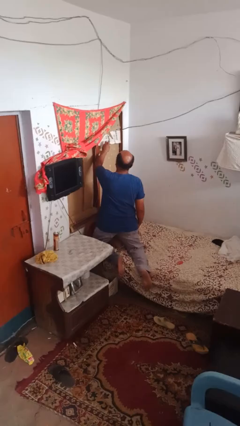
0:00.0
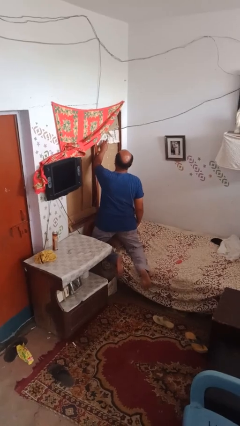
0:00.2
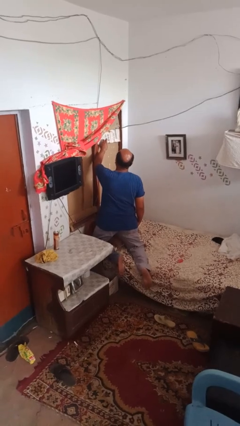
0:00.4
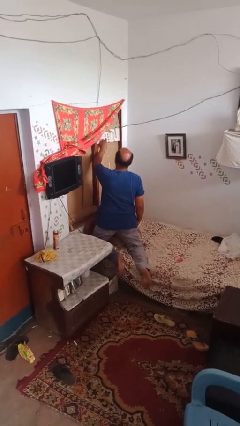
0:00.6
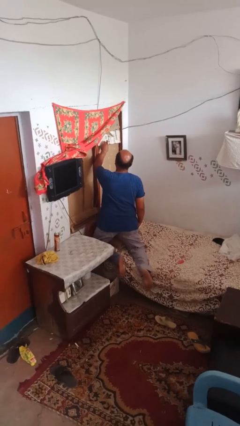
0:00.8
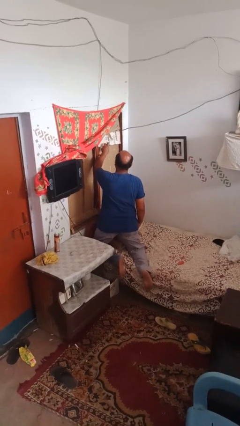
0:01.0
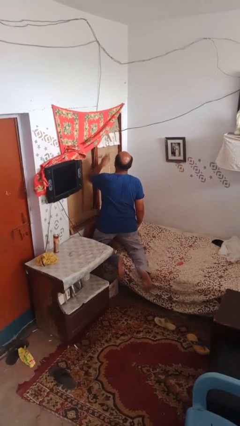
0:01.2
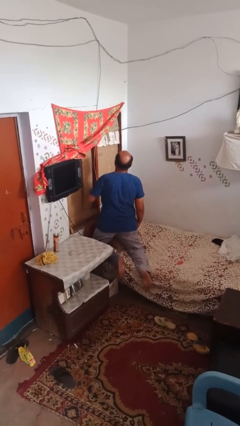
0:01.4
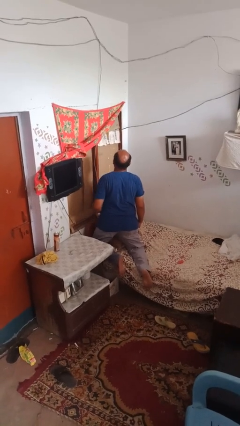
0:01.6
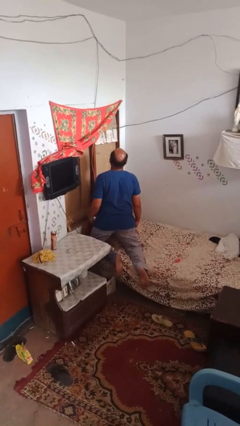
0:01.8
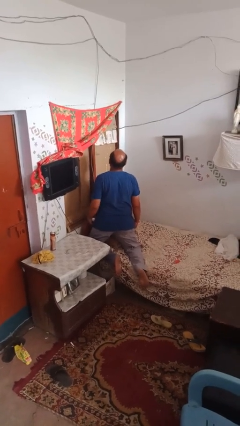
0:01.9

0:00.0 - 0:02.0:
person sprays from bottle

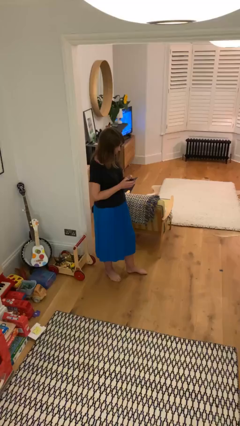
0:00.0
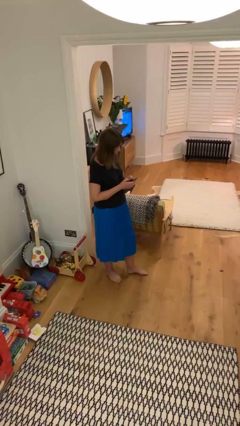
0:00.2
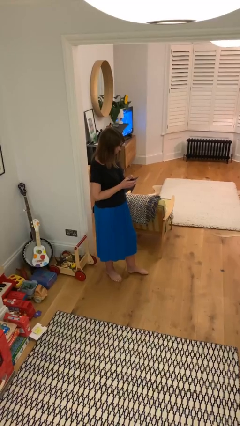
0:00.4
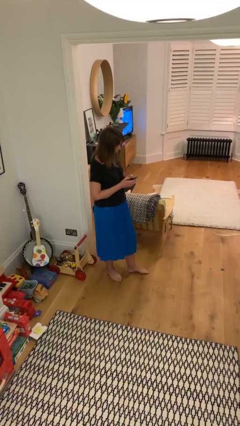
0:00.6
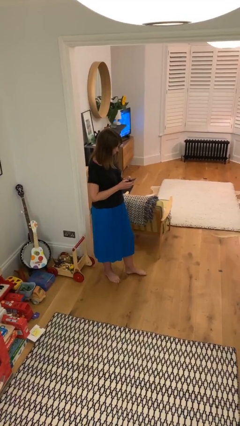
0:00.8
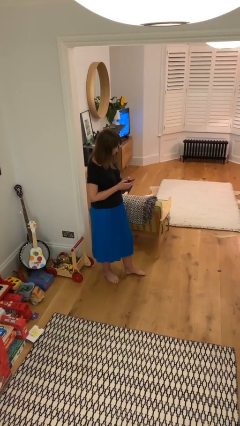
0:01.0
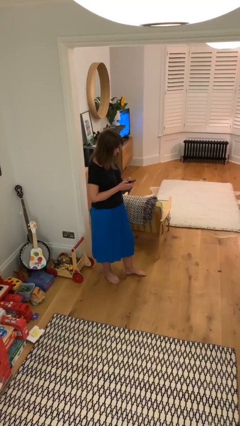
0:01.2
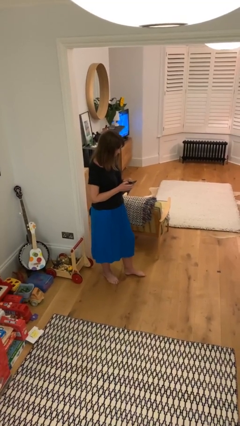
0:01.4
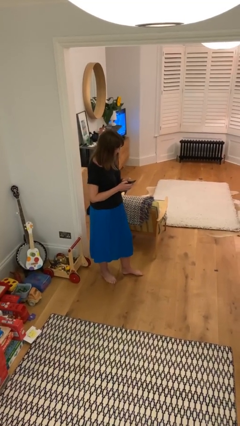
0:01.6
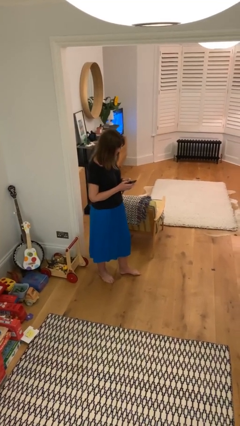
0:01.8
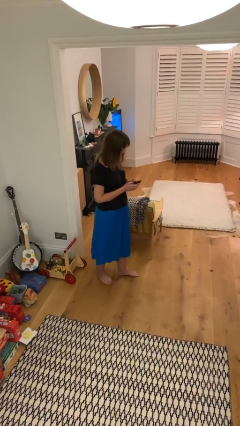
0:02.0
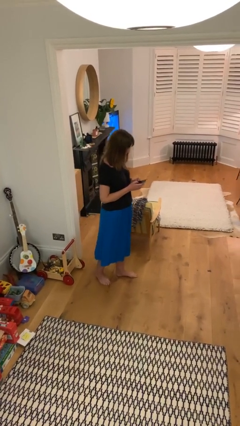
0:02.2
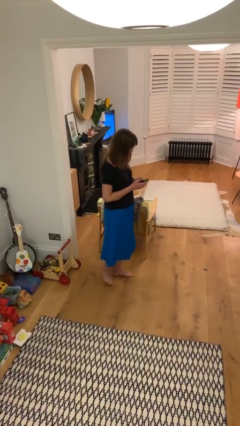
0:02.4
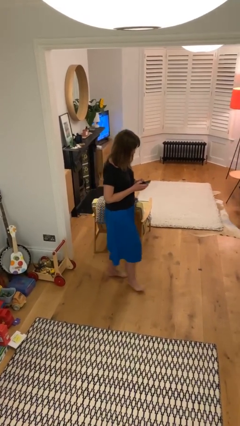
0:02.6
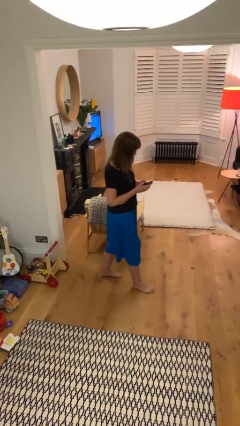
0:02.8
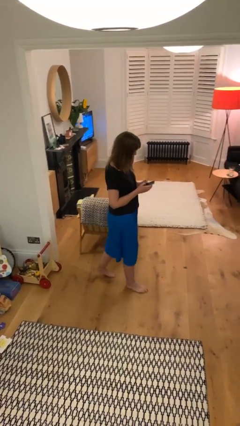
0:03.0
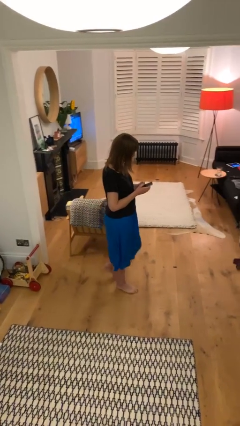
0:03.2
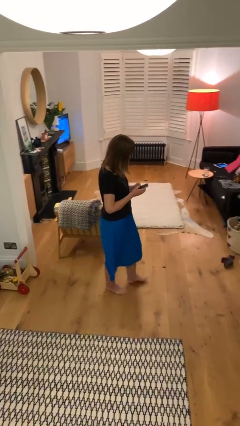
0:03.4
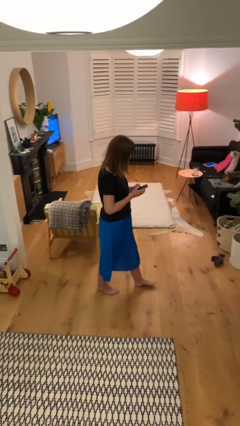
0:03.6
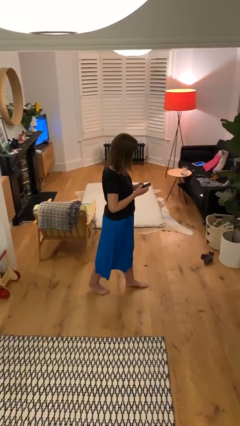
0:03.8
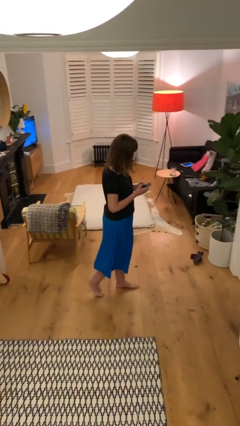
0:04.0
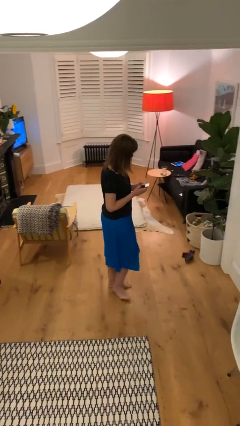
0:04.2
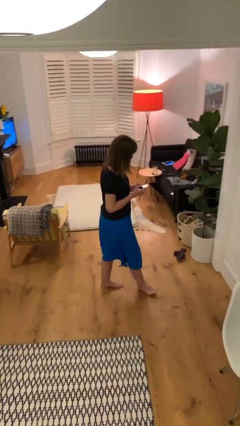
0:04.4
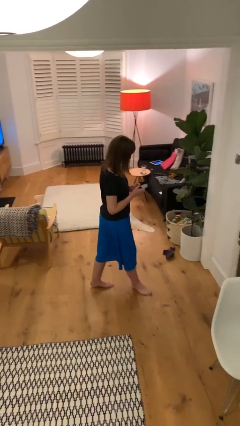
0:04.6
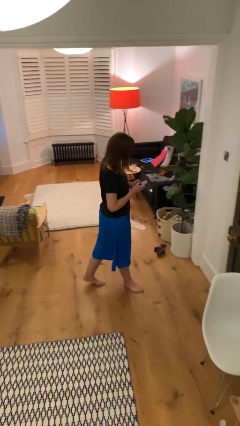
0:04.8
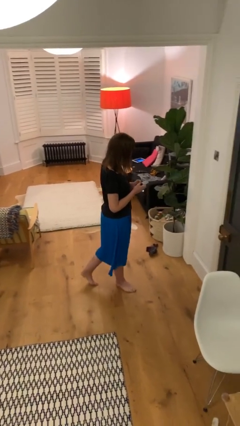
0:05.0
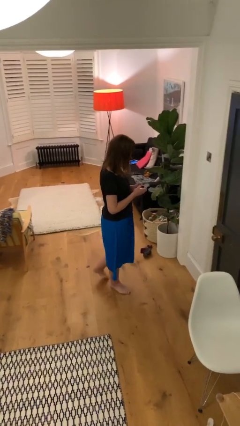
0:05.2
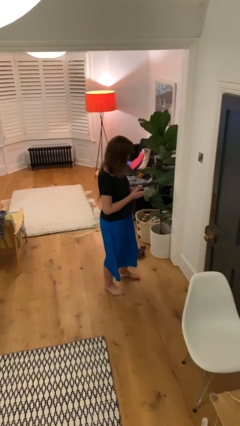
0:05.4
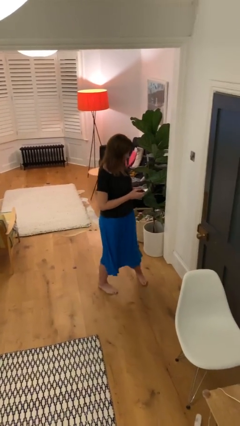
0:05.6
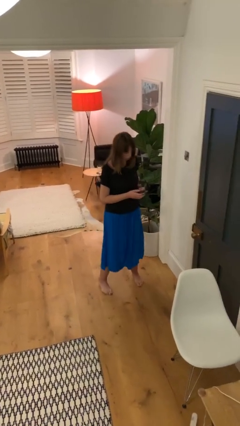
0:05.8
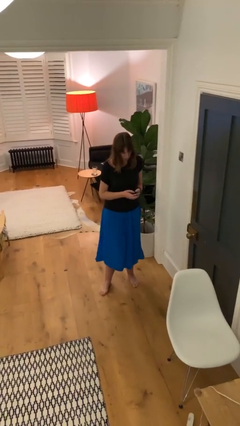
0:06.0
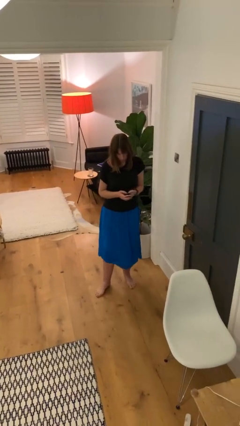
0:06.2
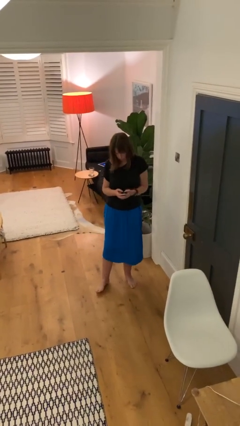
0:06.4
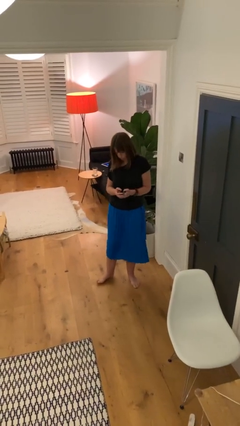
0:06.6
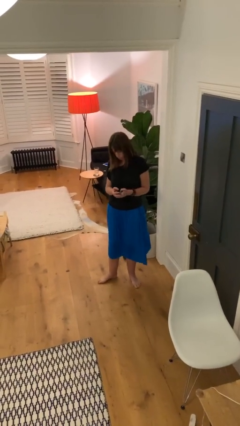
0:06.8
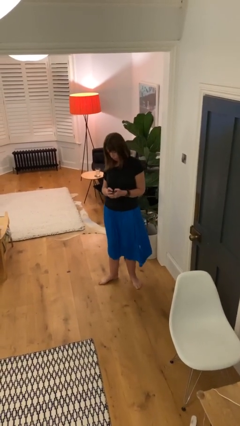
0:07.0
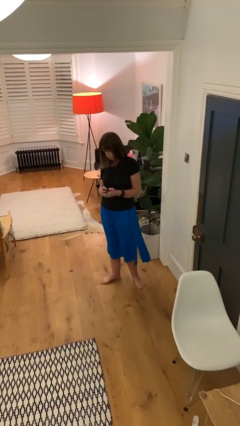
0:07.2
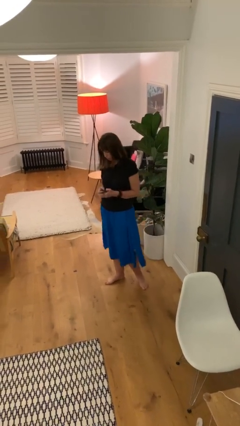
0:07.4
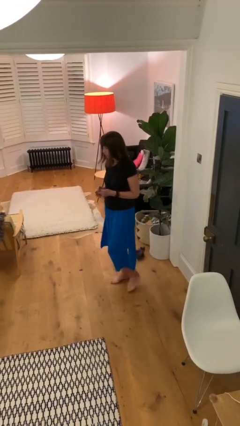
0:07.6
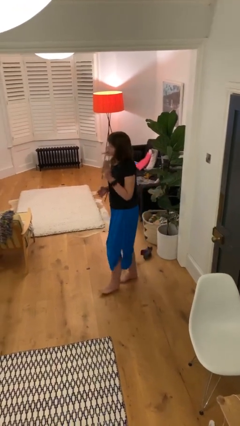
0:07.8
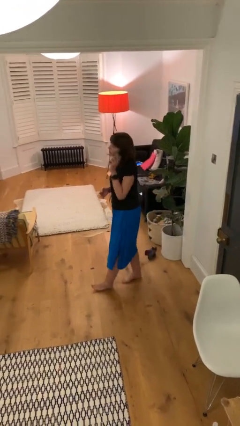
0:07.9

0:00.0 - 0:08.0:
person texts on phone

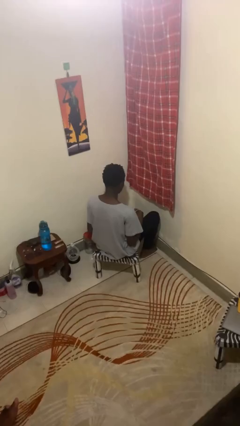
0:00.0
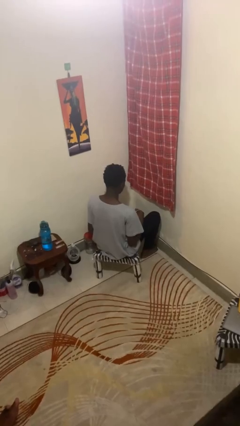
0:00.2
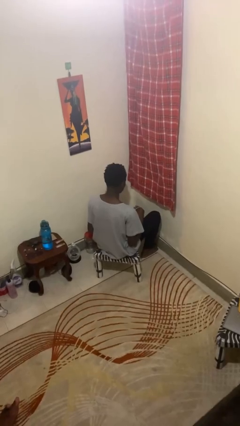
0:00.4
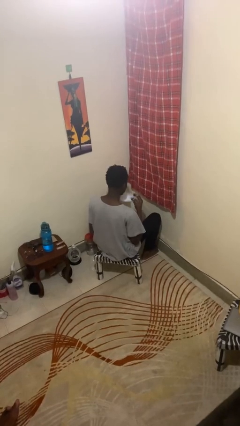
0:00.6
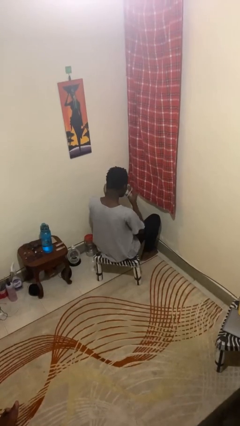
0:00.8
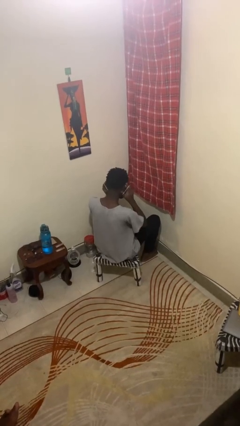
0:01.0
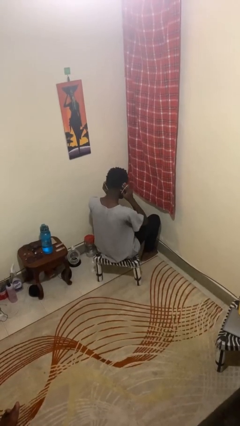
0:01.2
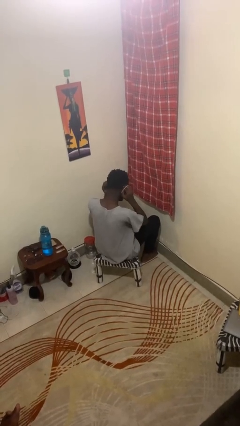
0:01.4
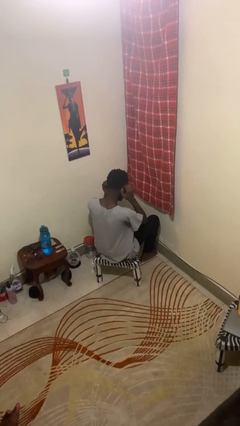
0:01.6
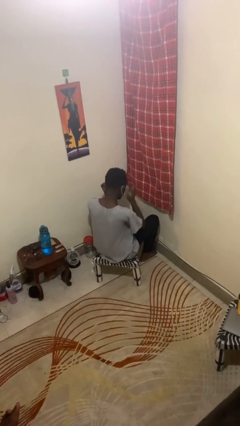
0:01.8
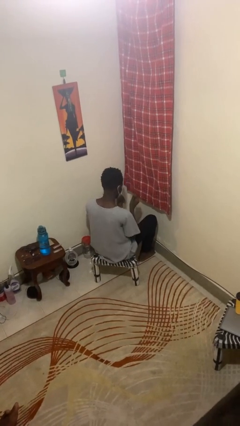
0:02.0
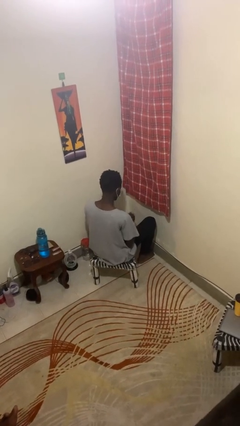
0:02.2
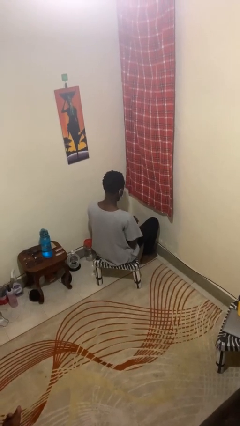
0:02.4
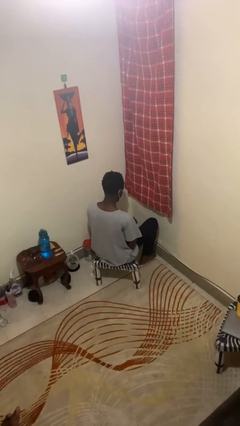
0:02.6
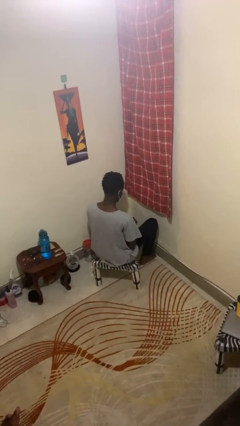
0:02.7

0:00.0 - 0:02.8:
person puts on facemask

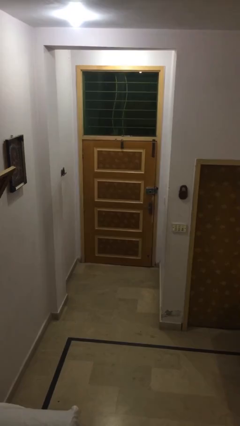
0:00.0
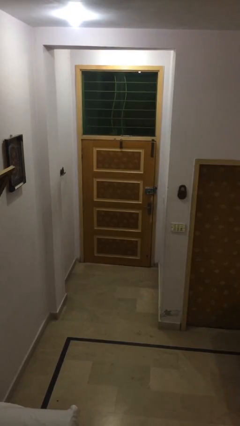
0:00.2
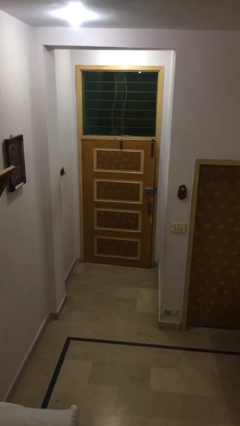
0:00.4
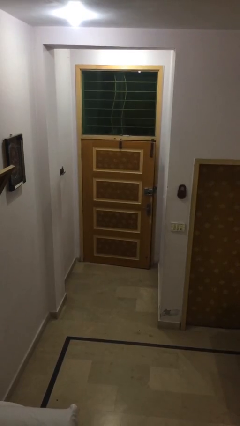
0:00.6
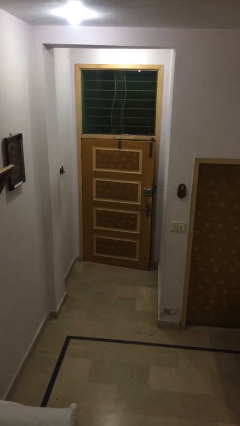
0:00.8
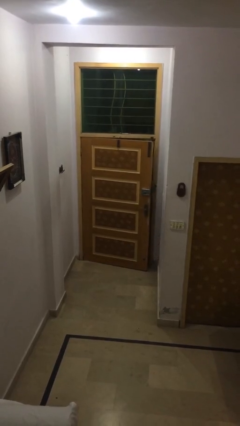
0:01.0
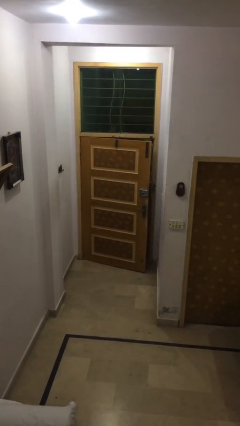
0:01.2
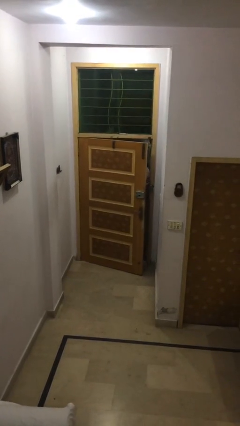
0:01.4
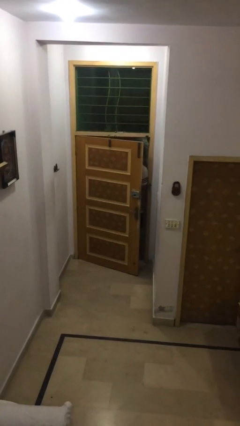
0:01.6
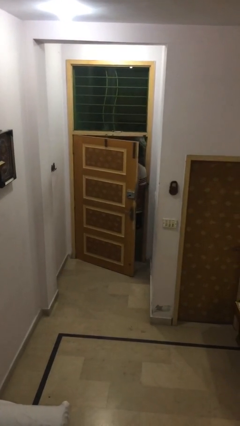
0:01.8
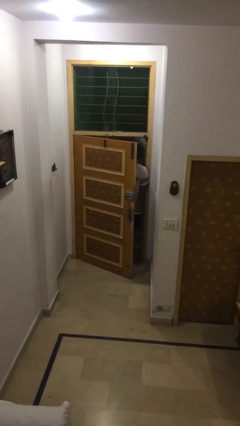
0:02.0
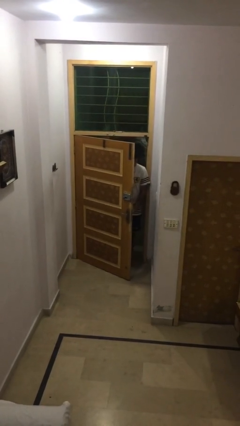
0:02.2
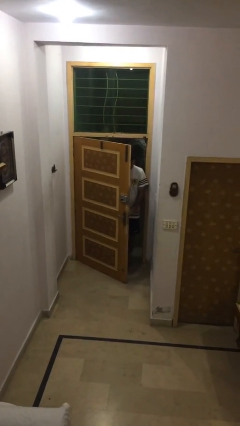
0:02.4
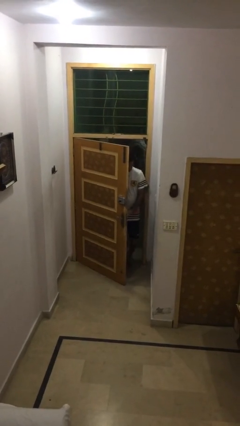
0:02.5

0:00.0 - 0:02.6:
person opens facility door

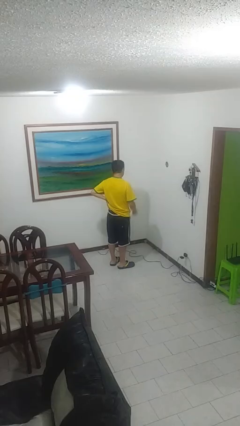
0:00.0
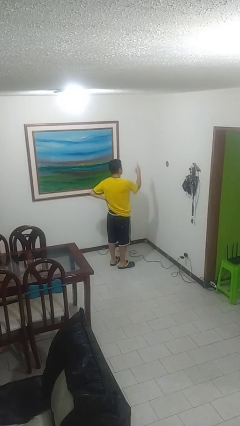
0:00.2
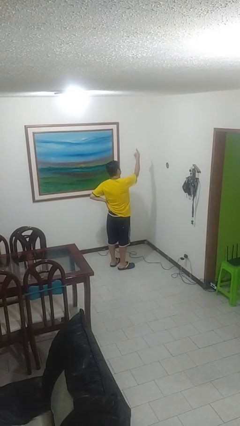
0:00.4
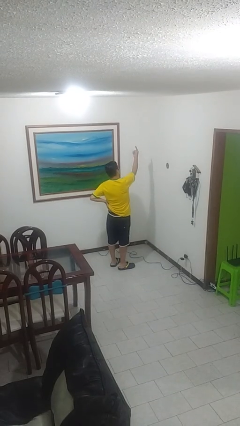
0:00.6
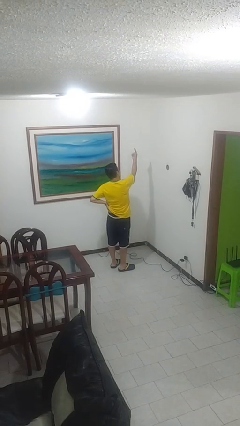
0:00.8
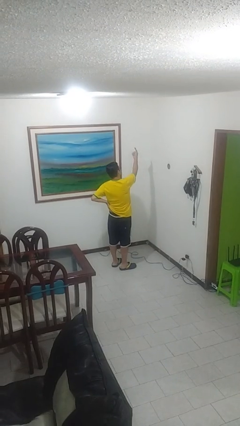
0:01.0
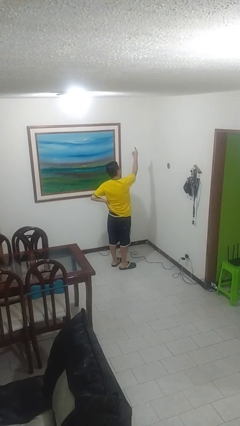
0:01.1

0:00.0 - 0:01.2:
person gestures number one

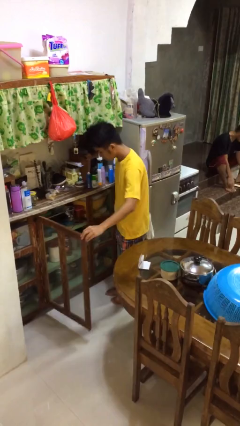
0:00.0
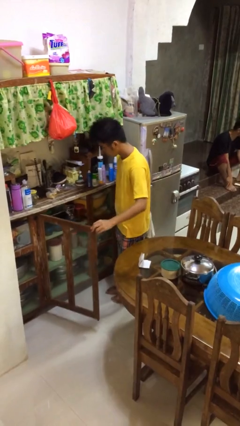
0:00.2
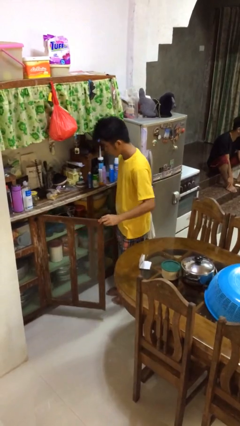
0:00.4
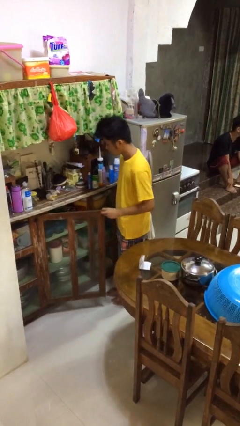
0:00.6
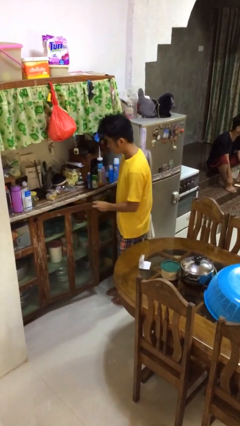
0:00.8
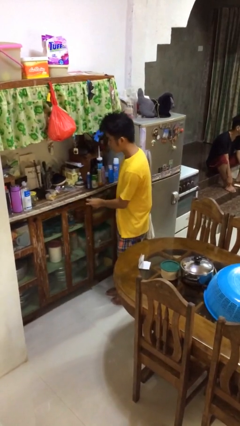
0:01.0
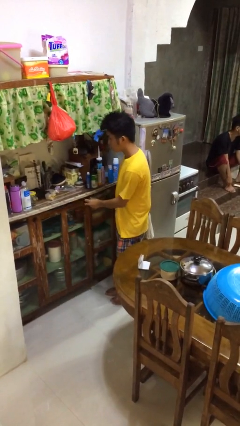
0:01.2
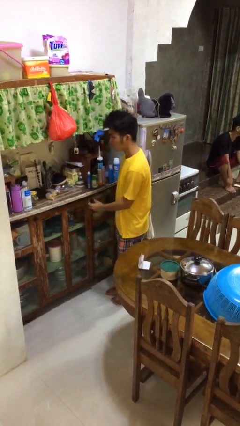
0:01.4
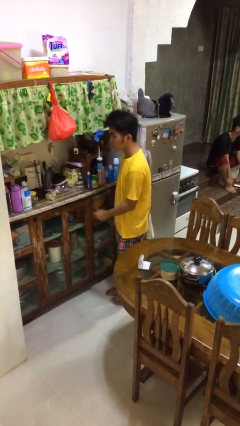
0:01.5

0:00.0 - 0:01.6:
person closes cabinet
